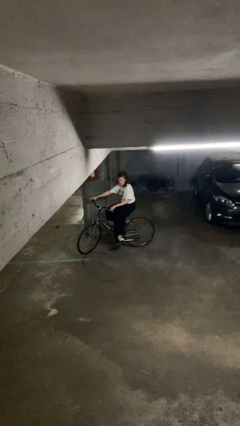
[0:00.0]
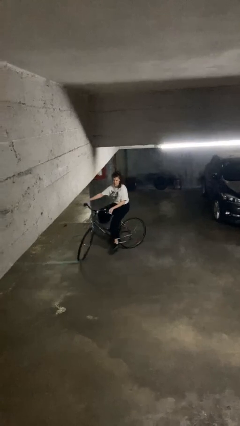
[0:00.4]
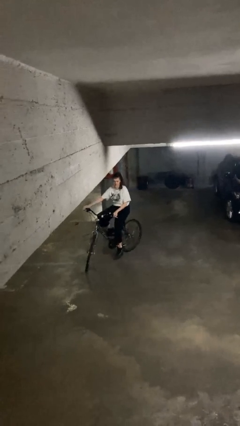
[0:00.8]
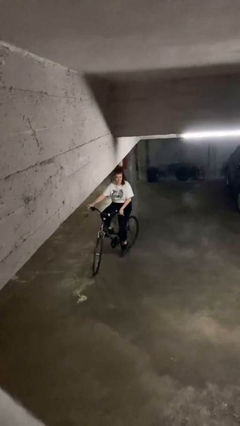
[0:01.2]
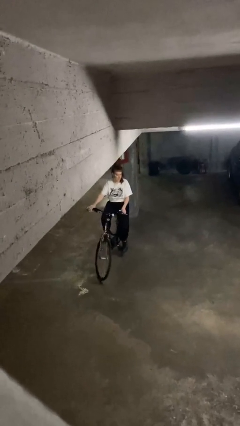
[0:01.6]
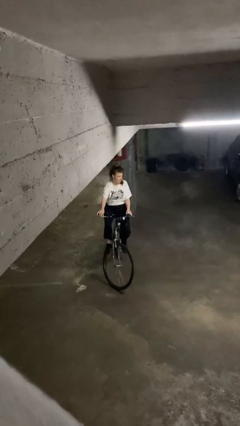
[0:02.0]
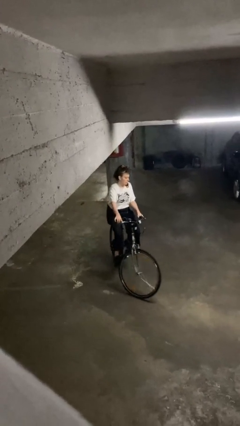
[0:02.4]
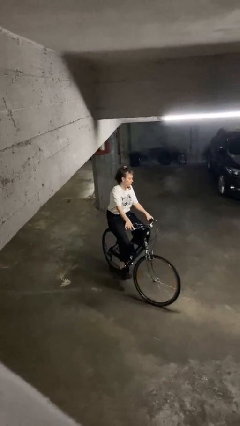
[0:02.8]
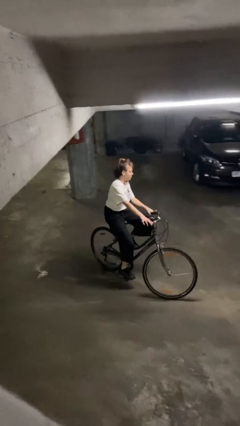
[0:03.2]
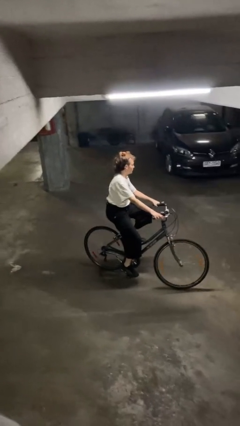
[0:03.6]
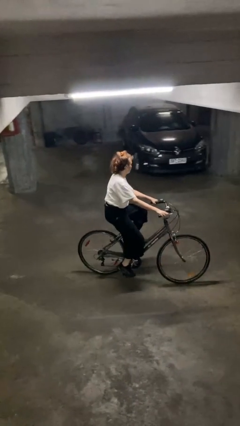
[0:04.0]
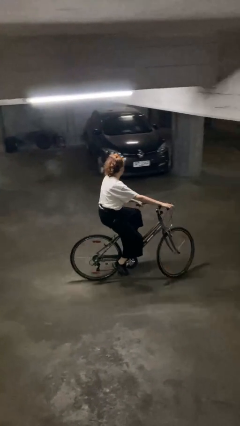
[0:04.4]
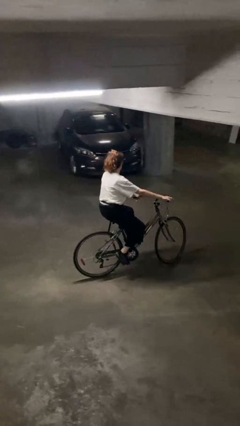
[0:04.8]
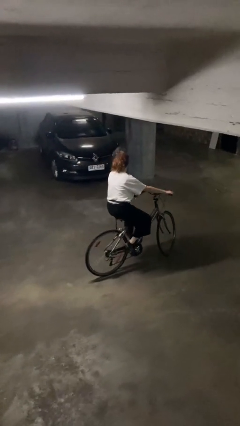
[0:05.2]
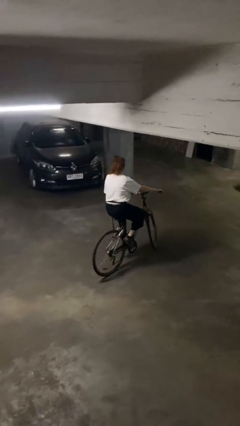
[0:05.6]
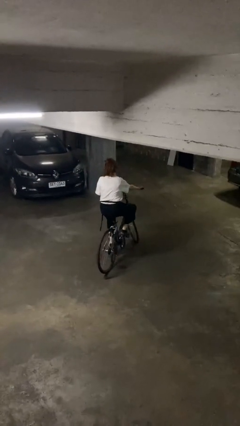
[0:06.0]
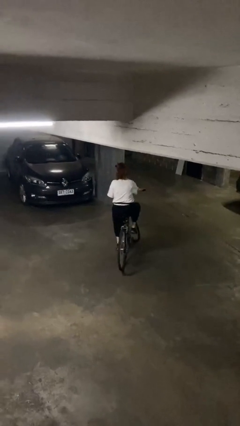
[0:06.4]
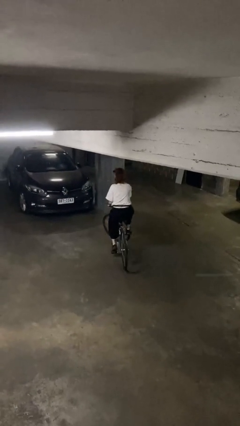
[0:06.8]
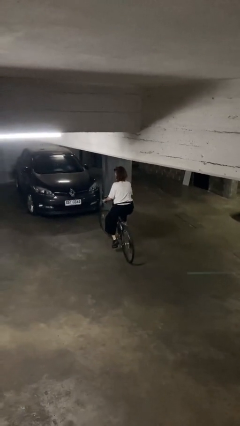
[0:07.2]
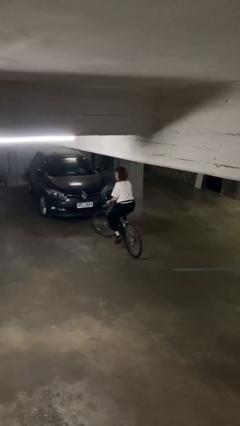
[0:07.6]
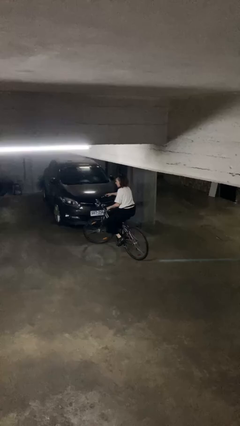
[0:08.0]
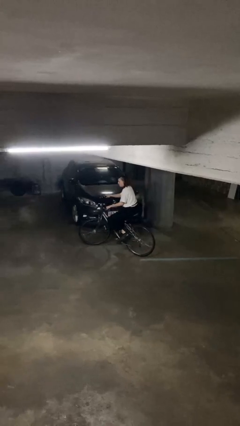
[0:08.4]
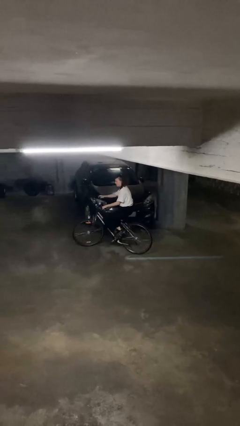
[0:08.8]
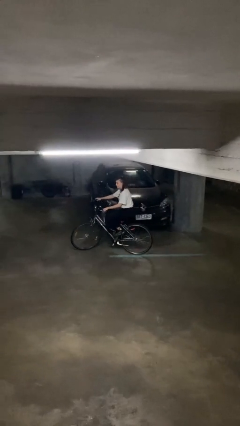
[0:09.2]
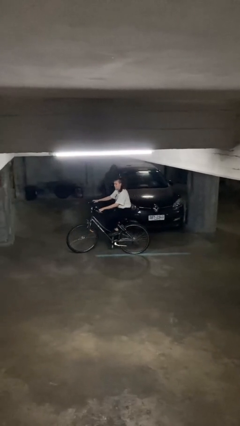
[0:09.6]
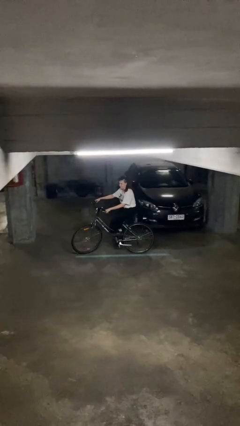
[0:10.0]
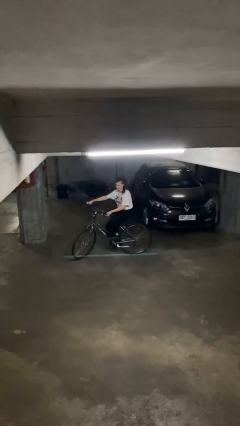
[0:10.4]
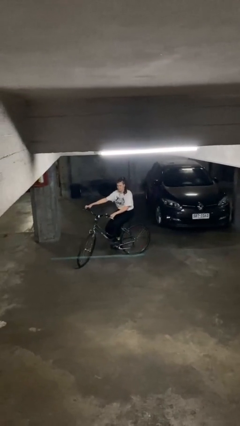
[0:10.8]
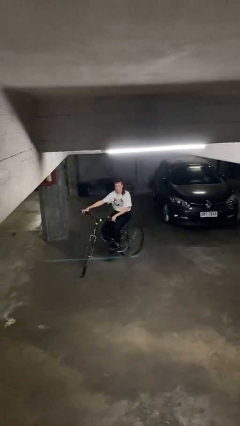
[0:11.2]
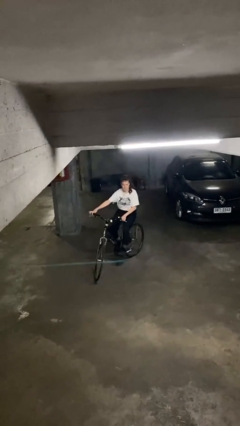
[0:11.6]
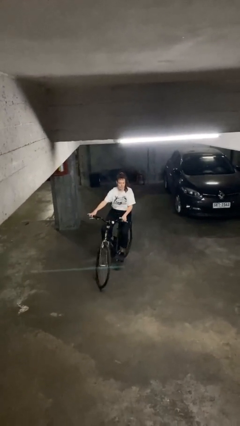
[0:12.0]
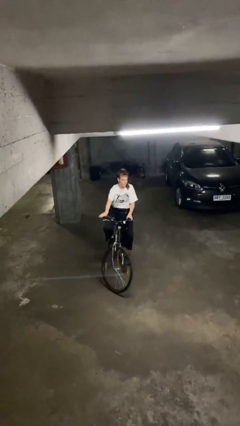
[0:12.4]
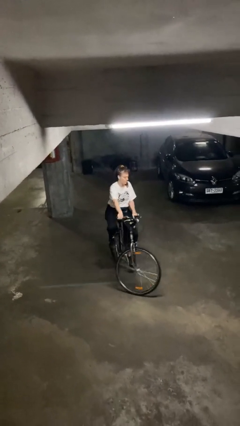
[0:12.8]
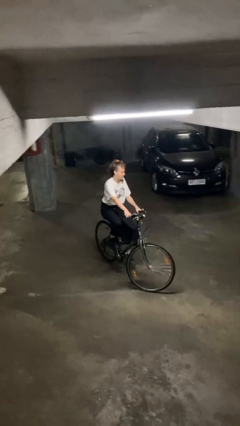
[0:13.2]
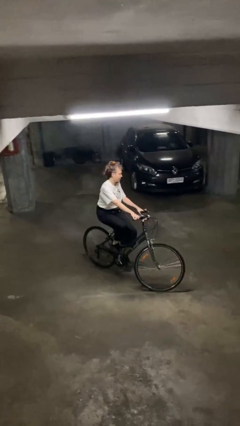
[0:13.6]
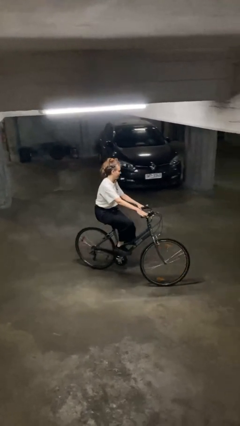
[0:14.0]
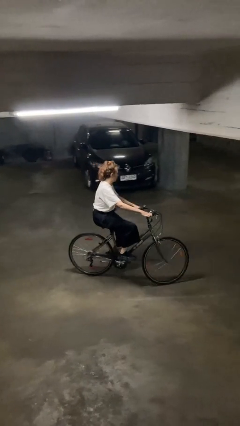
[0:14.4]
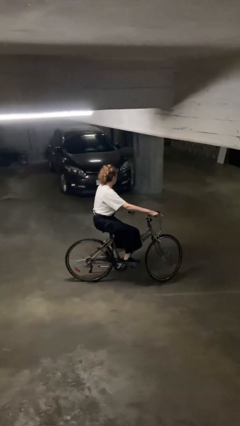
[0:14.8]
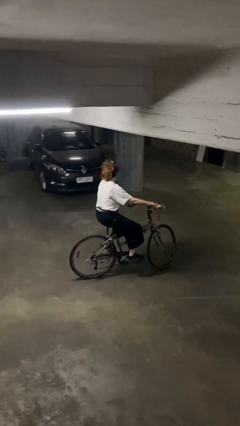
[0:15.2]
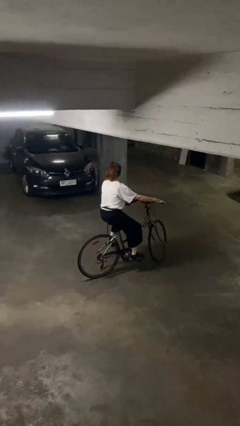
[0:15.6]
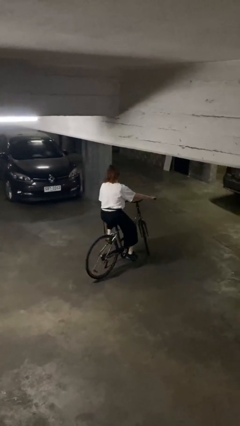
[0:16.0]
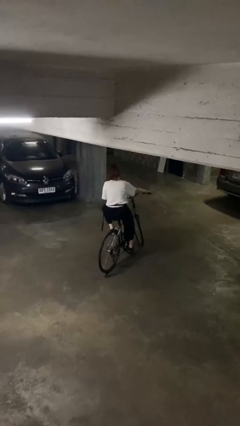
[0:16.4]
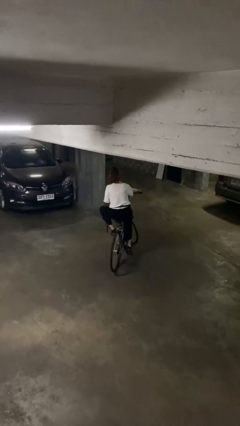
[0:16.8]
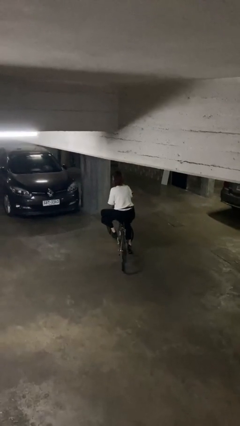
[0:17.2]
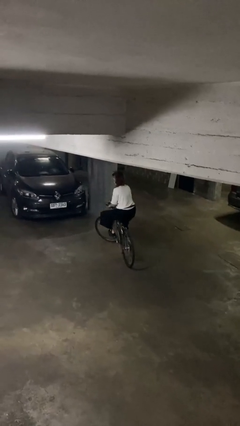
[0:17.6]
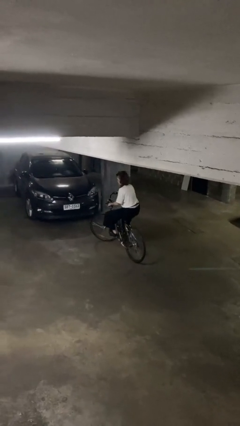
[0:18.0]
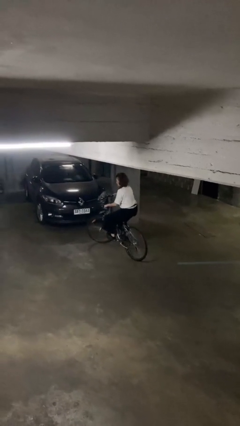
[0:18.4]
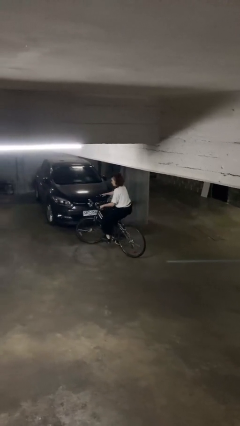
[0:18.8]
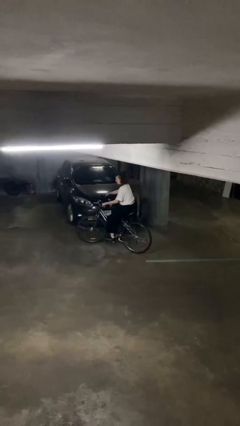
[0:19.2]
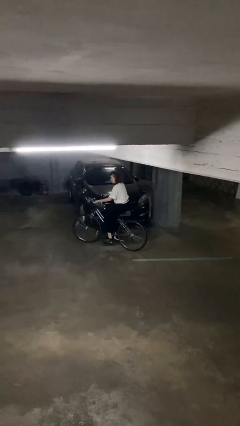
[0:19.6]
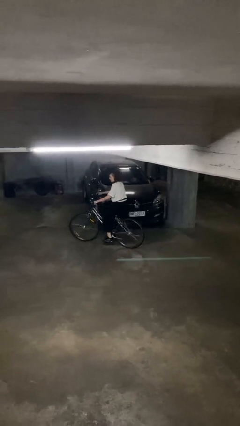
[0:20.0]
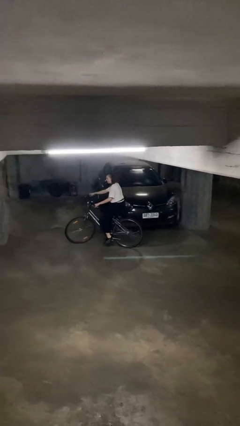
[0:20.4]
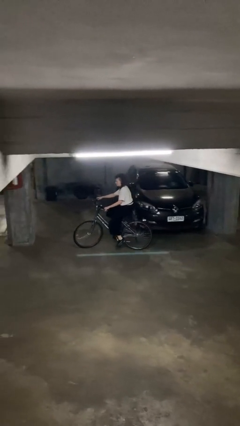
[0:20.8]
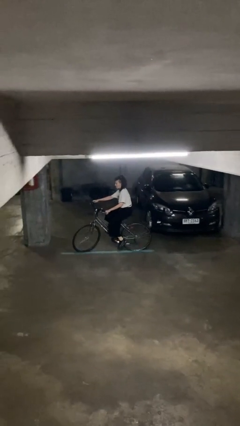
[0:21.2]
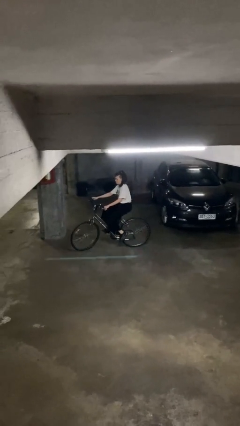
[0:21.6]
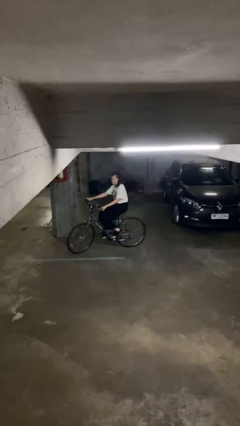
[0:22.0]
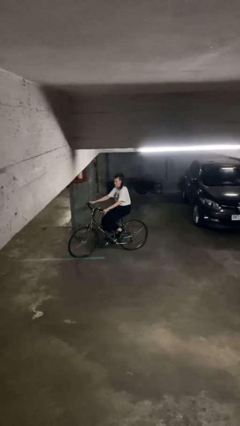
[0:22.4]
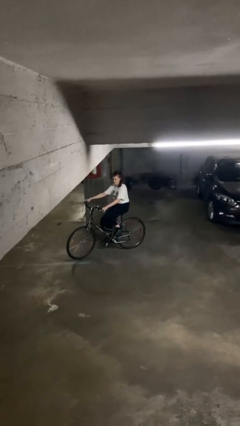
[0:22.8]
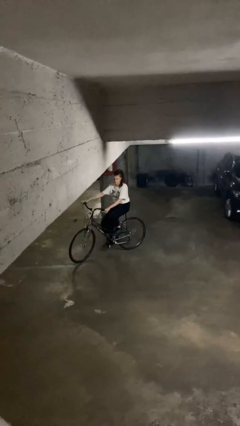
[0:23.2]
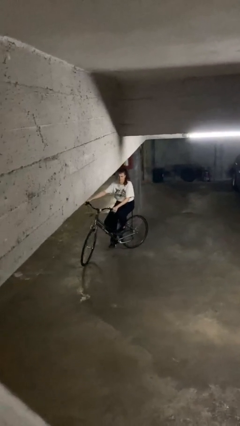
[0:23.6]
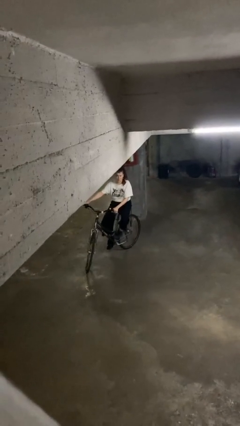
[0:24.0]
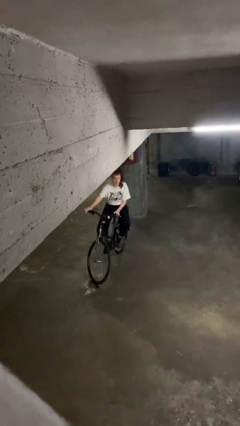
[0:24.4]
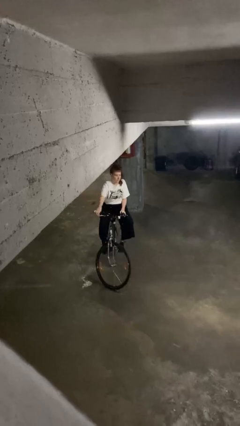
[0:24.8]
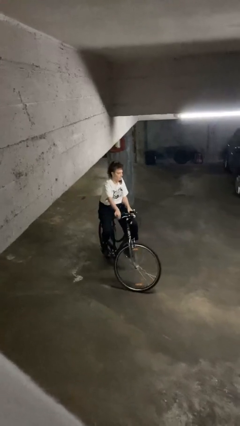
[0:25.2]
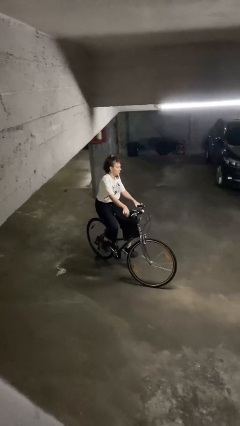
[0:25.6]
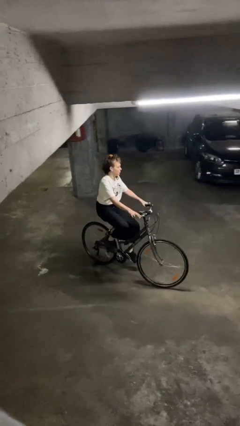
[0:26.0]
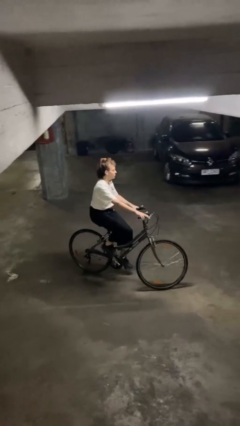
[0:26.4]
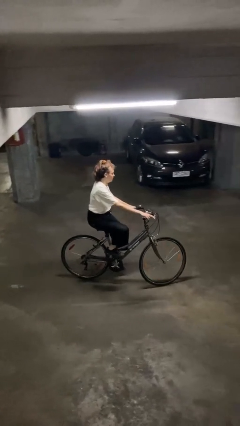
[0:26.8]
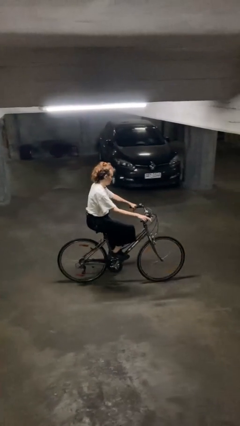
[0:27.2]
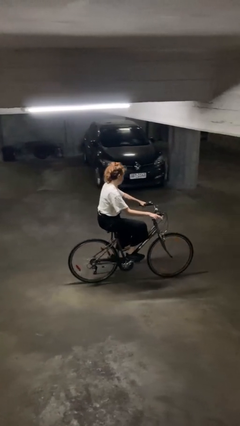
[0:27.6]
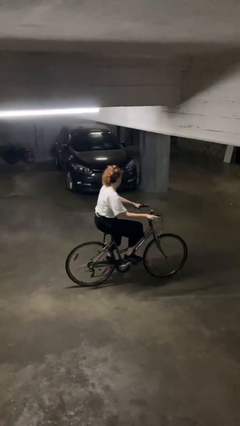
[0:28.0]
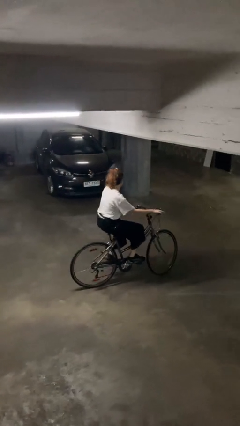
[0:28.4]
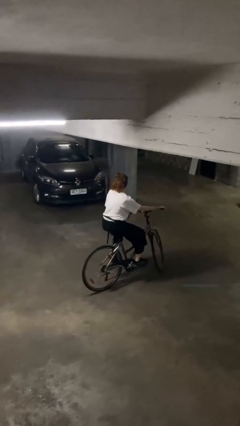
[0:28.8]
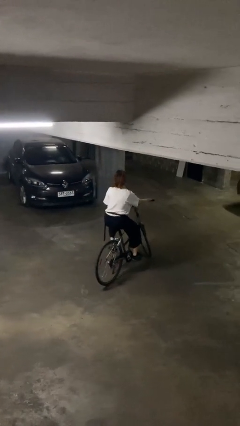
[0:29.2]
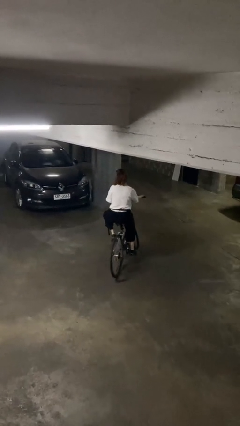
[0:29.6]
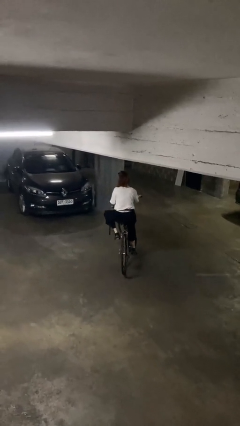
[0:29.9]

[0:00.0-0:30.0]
person rides bicycle

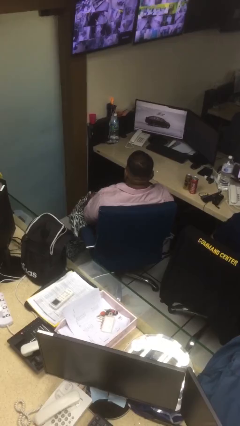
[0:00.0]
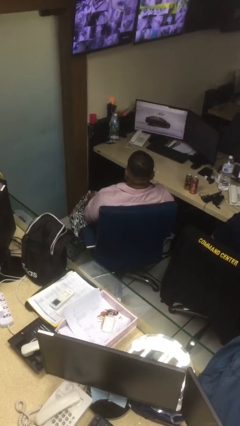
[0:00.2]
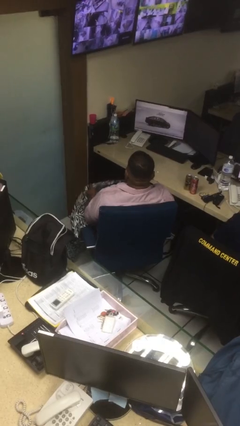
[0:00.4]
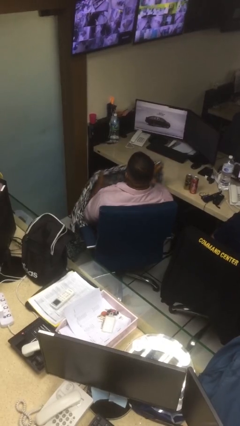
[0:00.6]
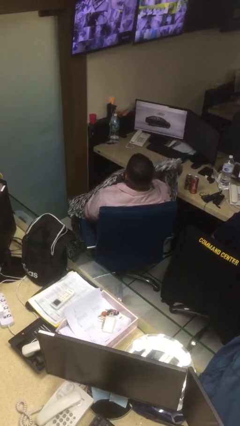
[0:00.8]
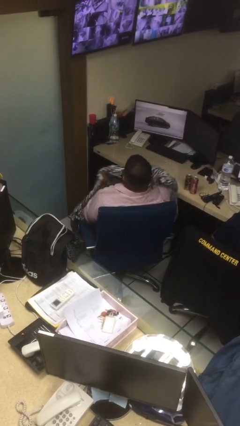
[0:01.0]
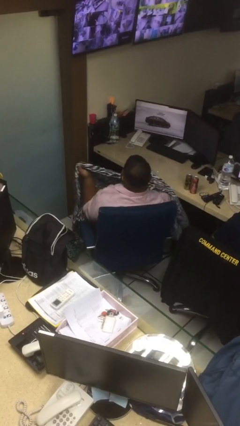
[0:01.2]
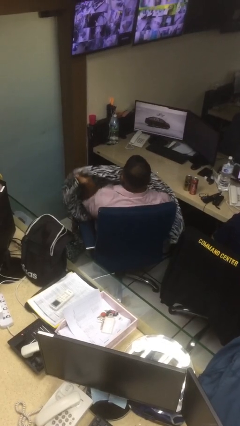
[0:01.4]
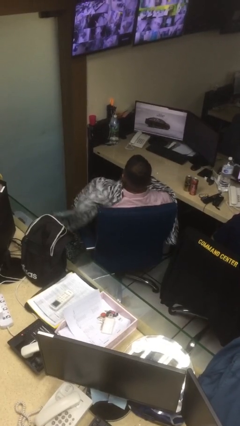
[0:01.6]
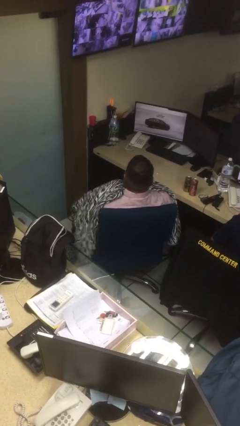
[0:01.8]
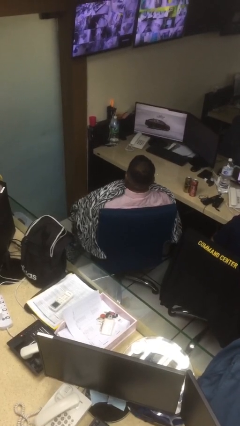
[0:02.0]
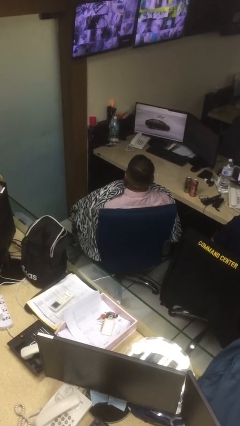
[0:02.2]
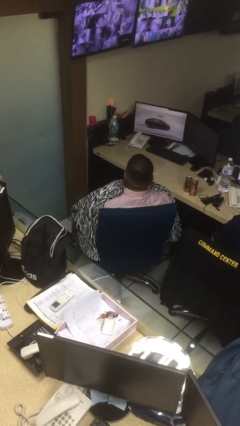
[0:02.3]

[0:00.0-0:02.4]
person covers with blanket

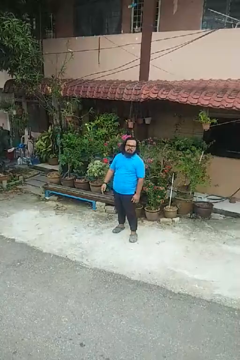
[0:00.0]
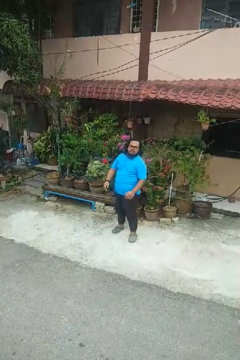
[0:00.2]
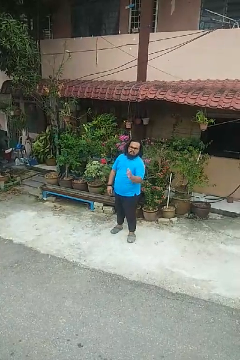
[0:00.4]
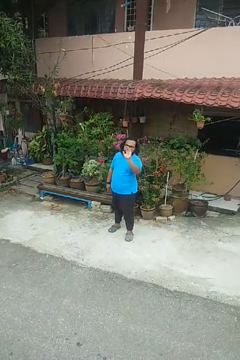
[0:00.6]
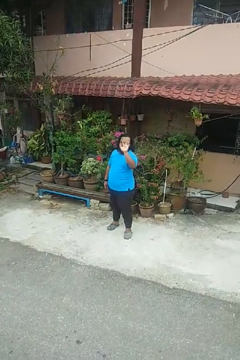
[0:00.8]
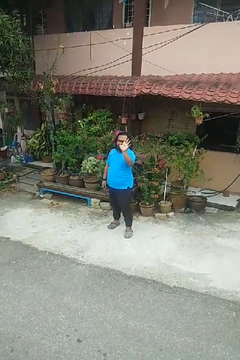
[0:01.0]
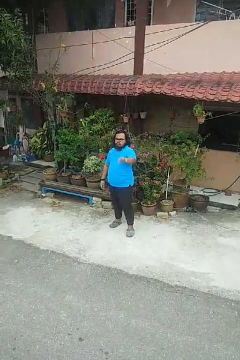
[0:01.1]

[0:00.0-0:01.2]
person waves at person
